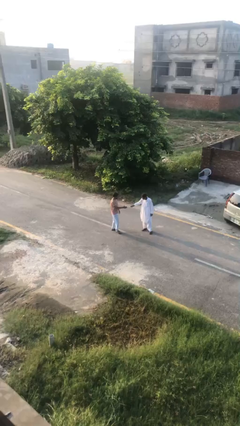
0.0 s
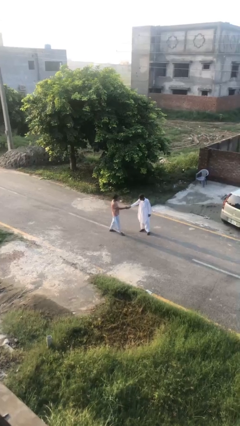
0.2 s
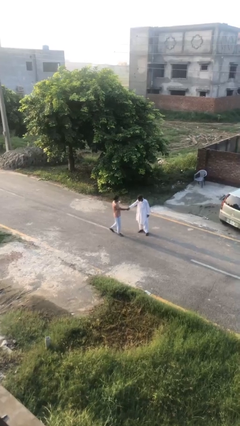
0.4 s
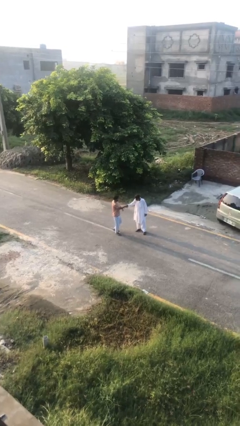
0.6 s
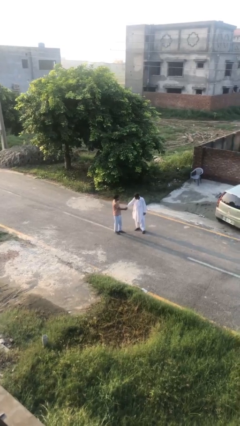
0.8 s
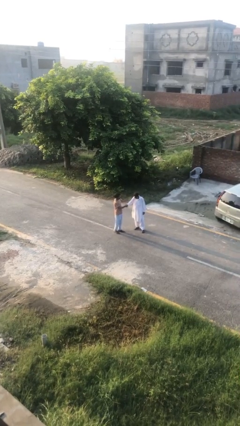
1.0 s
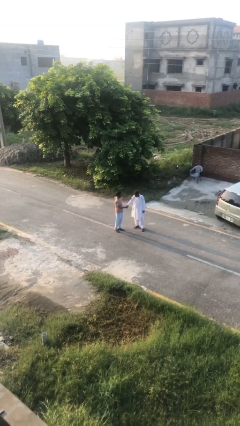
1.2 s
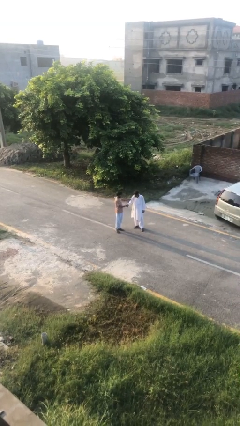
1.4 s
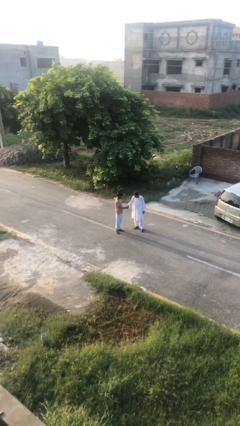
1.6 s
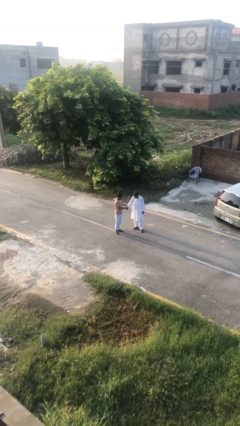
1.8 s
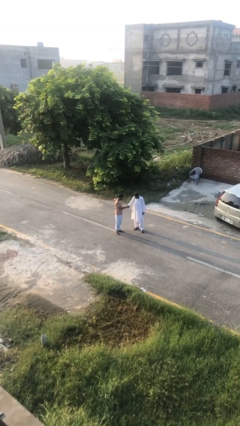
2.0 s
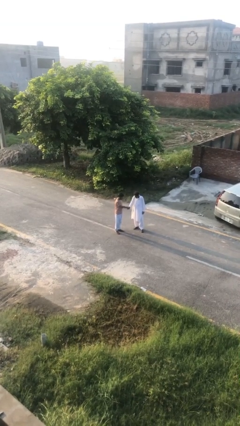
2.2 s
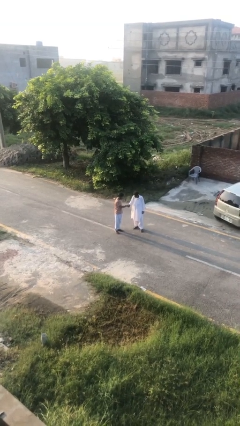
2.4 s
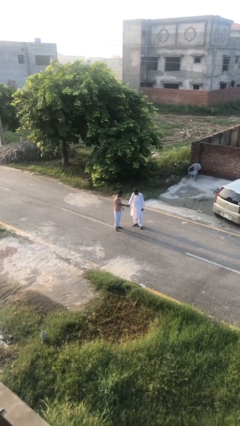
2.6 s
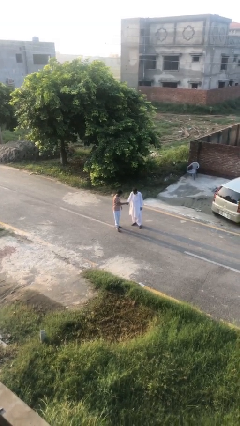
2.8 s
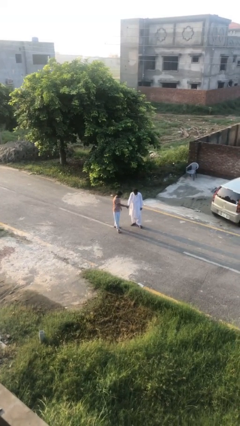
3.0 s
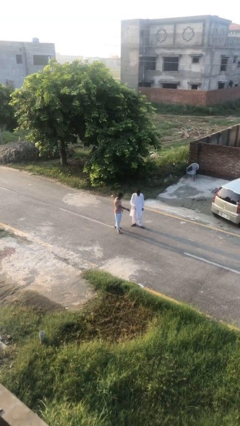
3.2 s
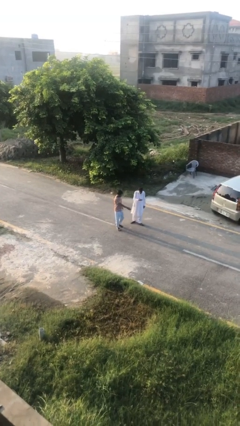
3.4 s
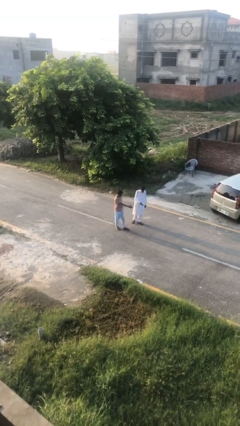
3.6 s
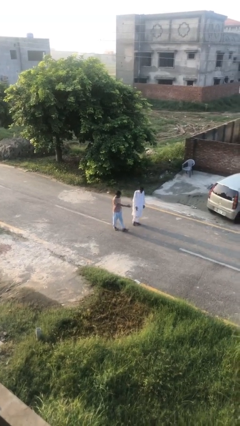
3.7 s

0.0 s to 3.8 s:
person shakes hand

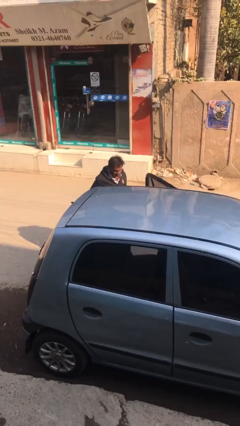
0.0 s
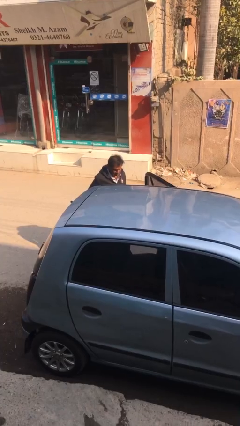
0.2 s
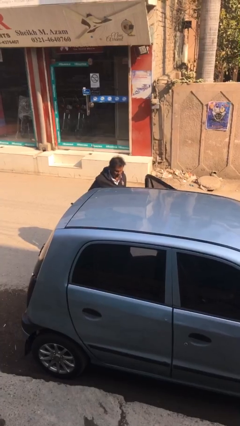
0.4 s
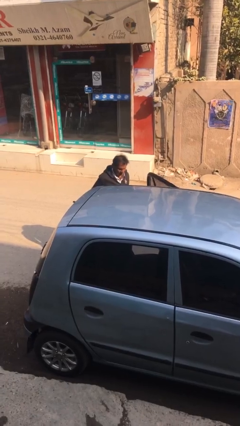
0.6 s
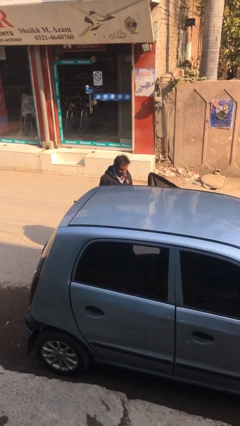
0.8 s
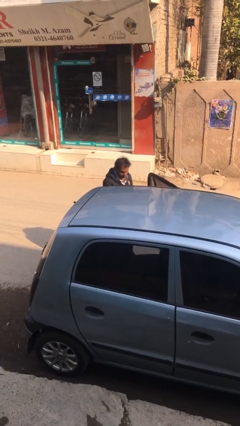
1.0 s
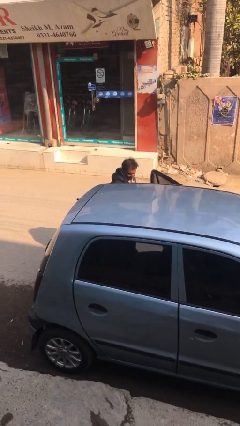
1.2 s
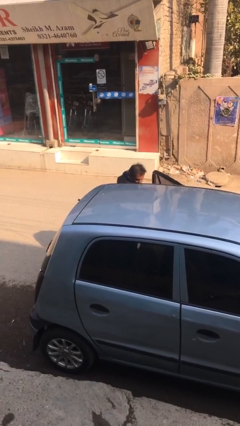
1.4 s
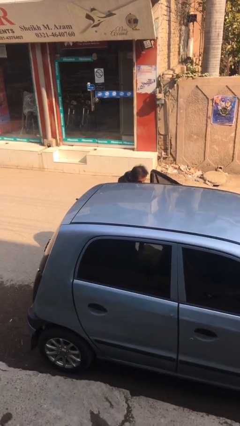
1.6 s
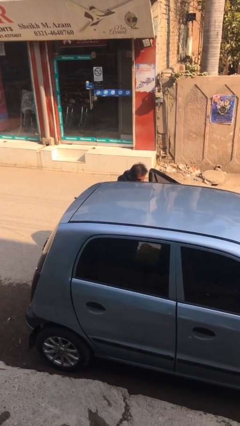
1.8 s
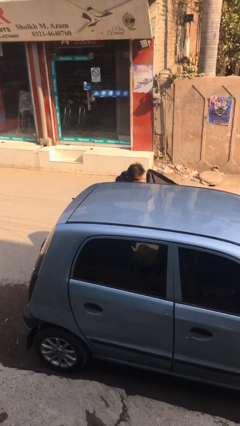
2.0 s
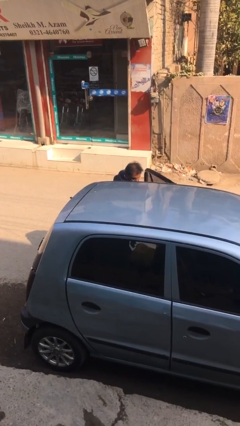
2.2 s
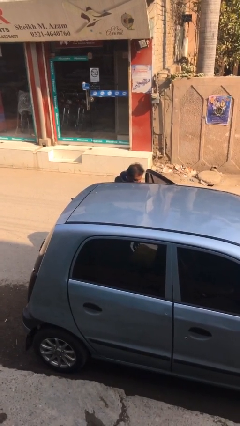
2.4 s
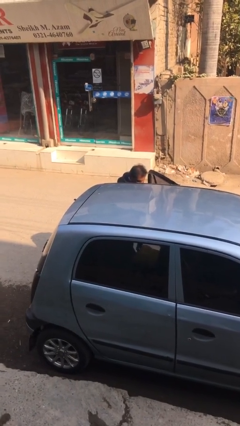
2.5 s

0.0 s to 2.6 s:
person loads car

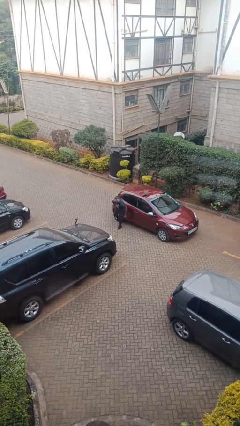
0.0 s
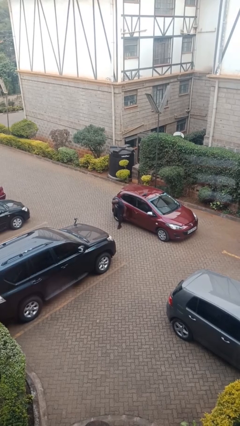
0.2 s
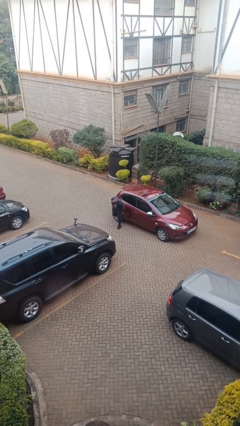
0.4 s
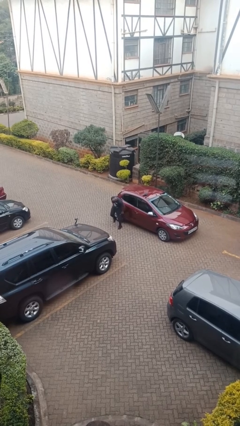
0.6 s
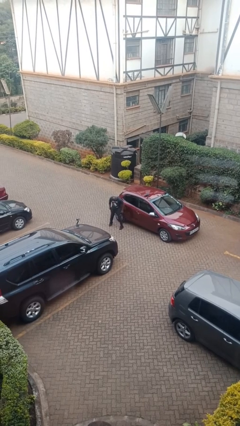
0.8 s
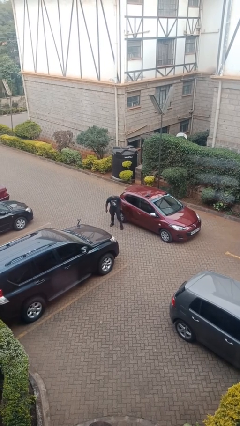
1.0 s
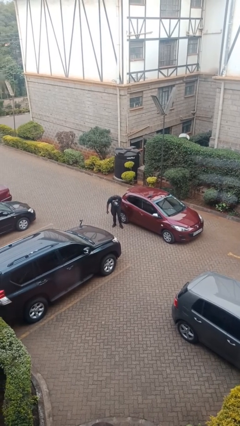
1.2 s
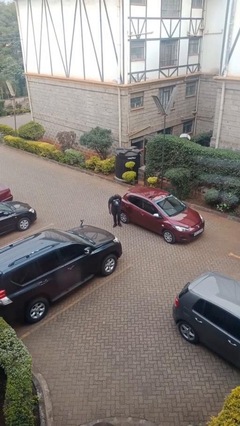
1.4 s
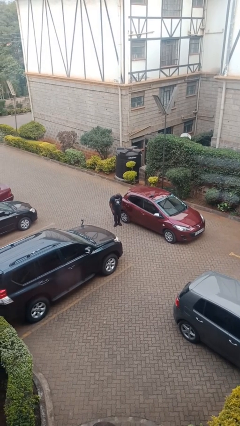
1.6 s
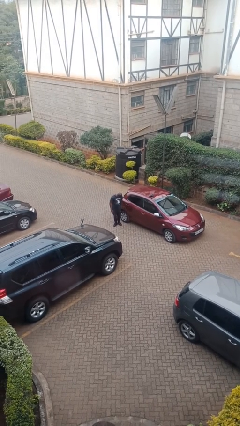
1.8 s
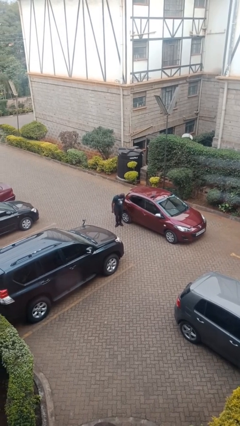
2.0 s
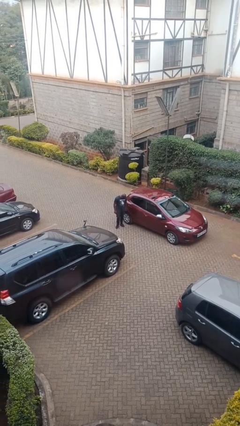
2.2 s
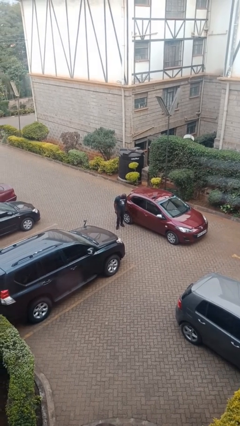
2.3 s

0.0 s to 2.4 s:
person kicks car tires

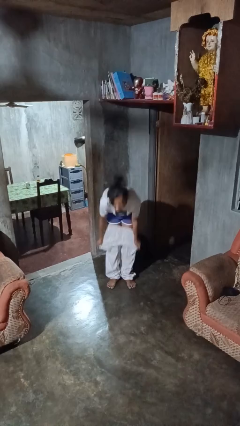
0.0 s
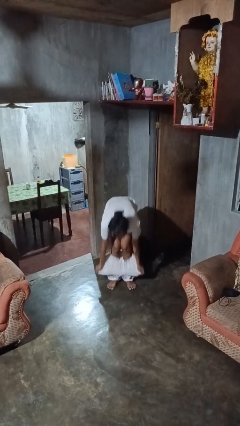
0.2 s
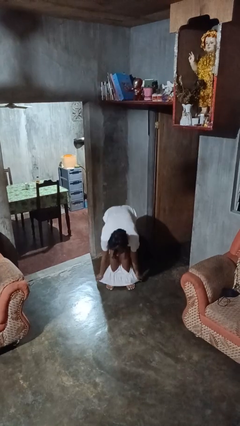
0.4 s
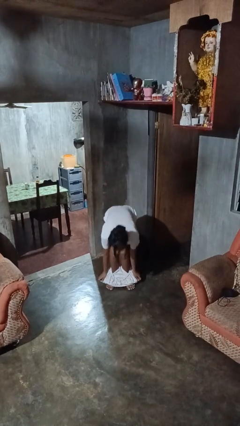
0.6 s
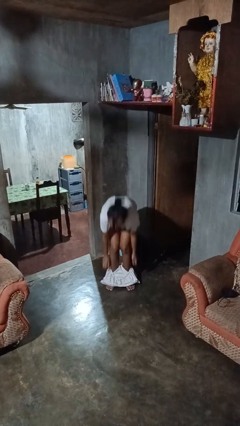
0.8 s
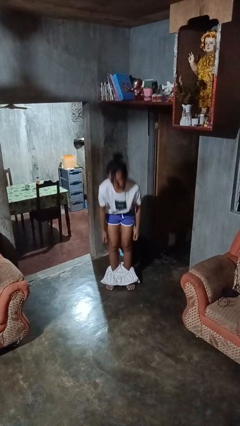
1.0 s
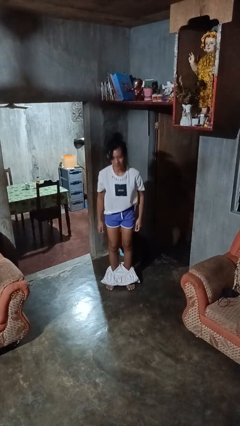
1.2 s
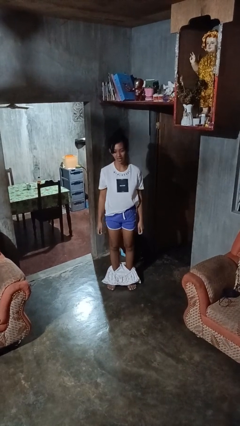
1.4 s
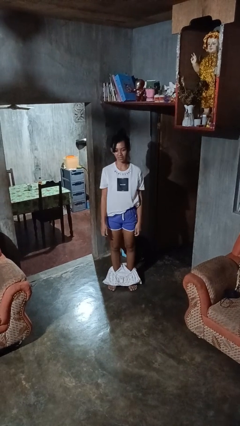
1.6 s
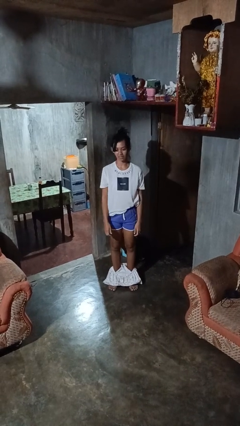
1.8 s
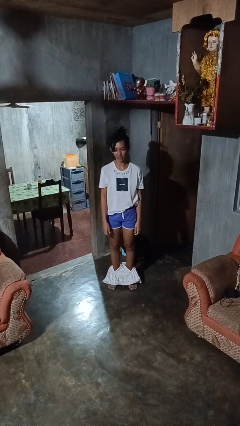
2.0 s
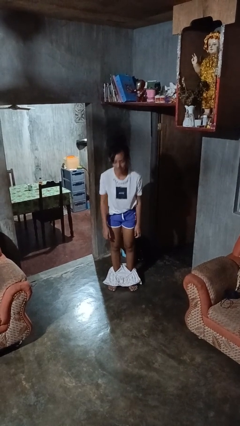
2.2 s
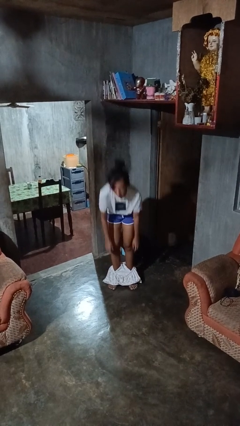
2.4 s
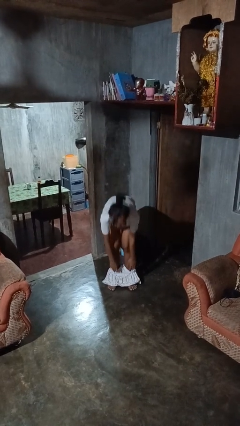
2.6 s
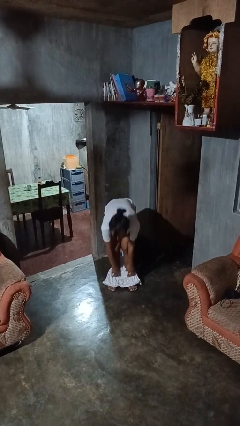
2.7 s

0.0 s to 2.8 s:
person takes off pants

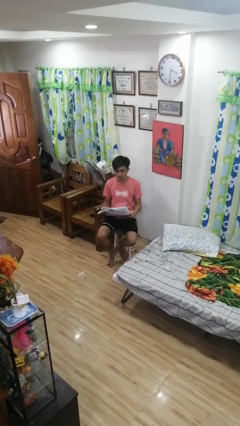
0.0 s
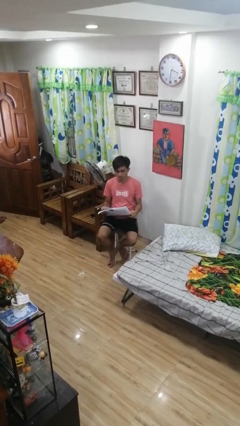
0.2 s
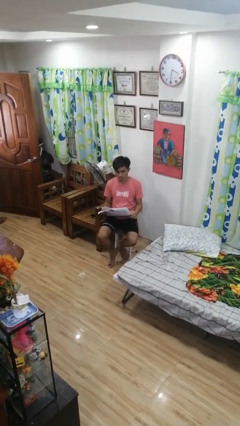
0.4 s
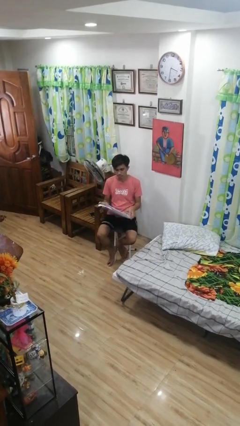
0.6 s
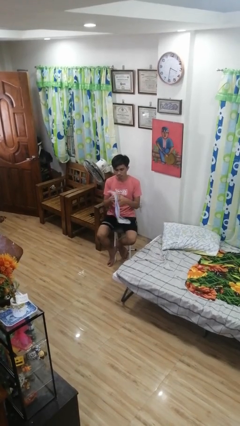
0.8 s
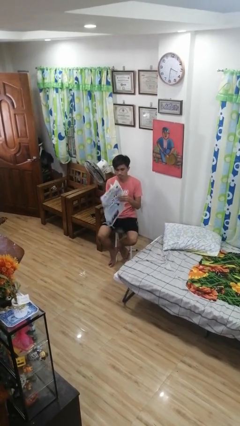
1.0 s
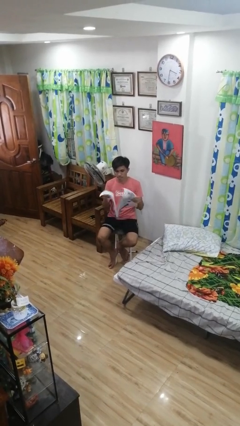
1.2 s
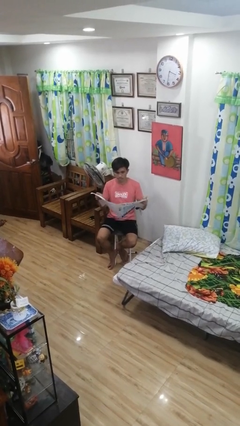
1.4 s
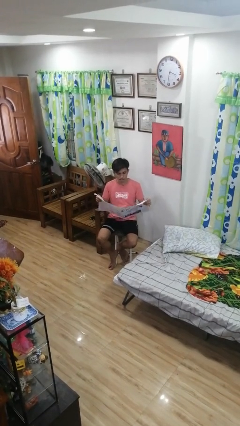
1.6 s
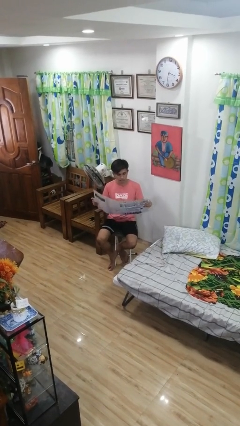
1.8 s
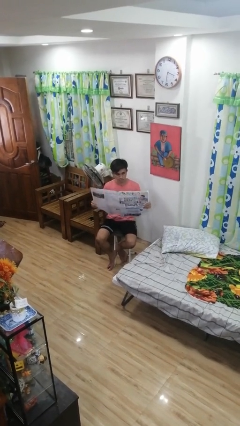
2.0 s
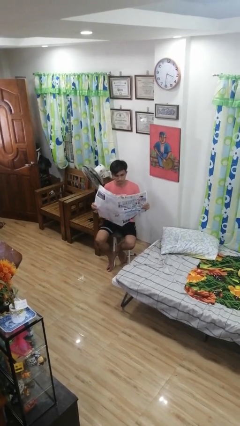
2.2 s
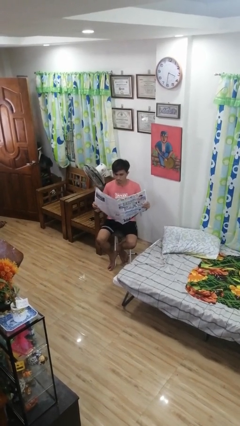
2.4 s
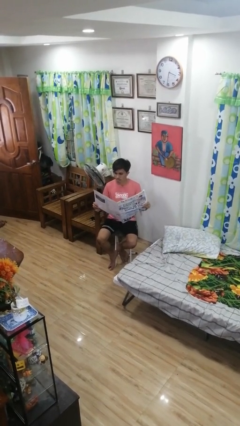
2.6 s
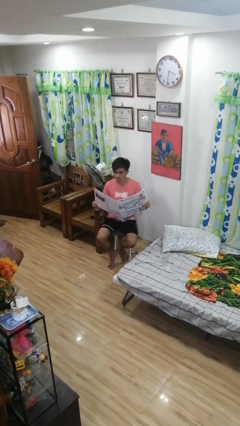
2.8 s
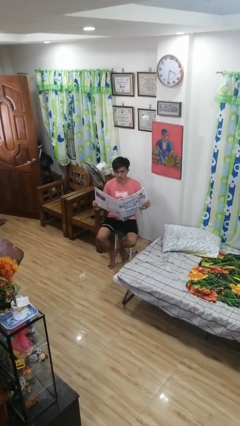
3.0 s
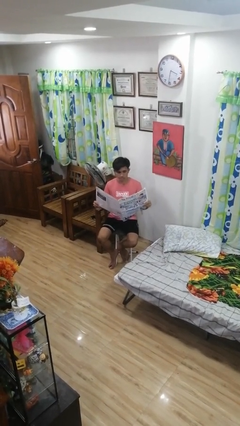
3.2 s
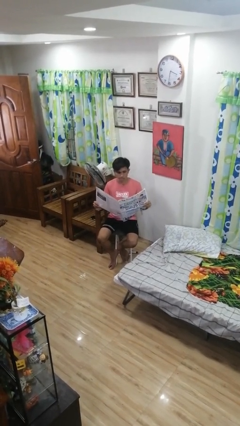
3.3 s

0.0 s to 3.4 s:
person reads newspaper

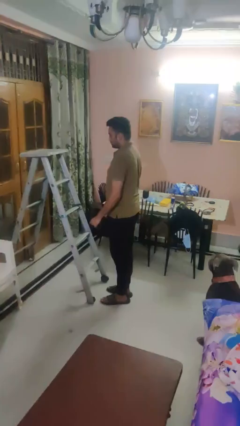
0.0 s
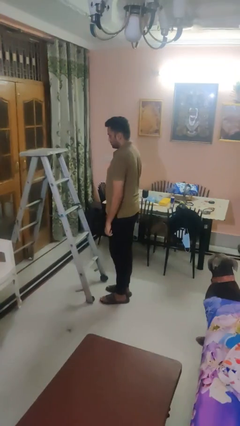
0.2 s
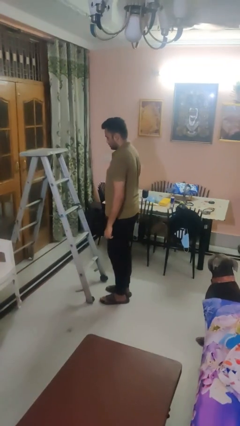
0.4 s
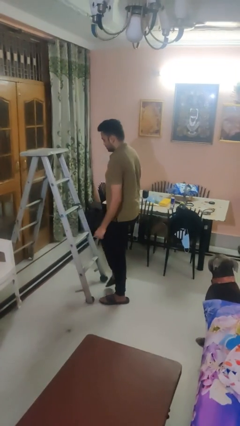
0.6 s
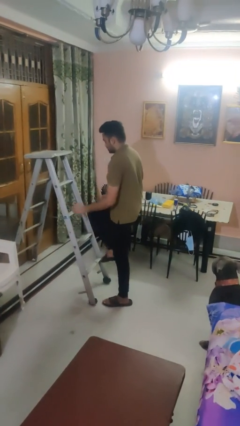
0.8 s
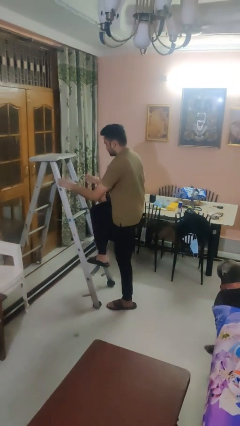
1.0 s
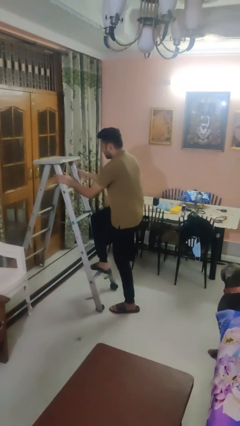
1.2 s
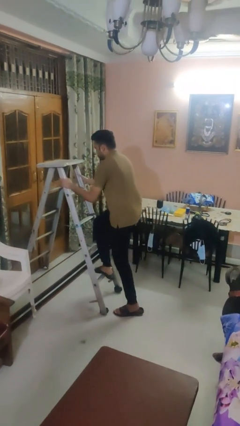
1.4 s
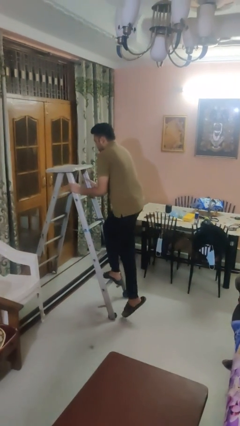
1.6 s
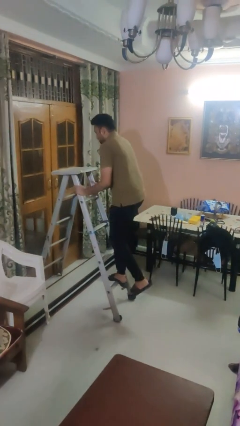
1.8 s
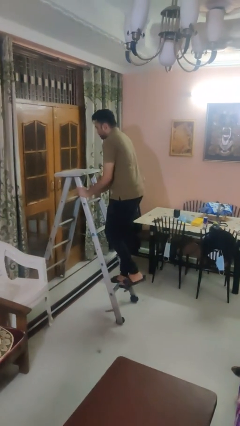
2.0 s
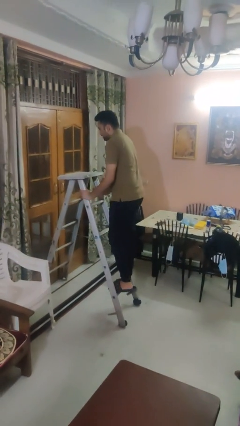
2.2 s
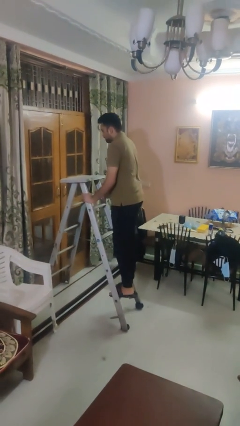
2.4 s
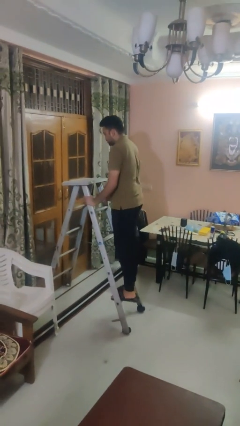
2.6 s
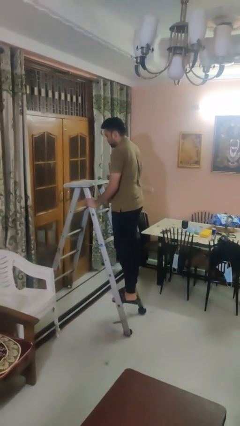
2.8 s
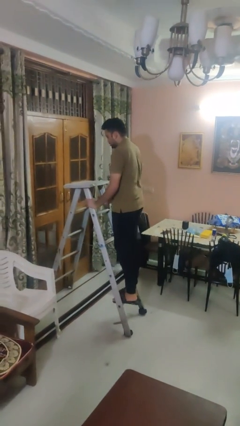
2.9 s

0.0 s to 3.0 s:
person climbs up ladder
